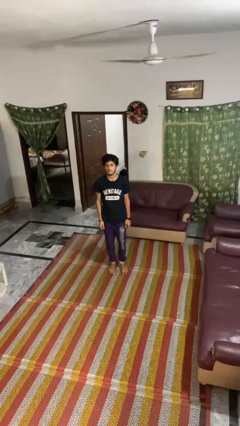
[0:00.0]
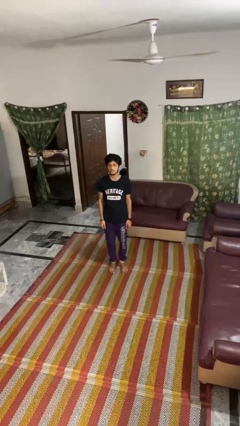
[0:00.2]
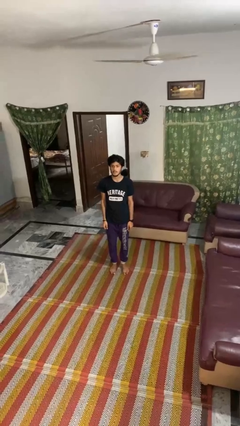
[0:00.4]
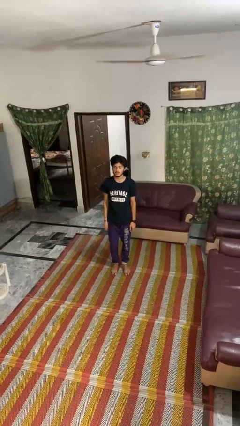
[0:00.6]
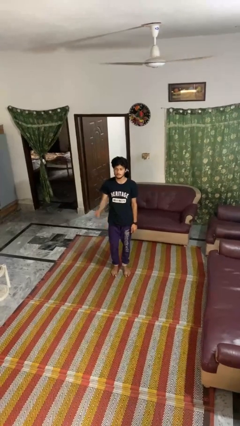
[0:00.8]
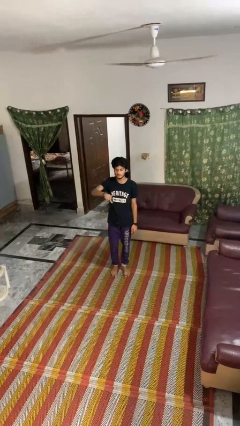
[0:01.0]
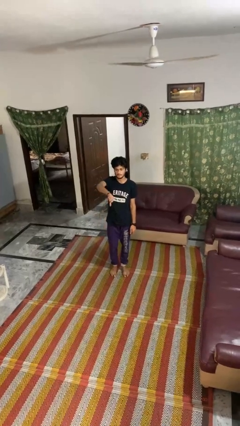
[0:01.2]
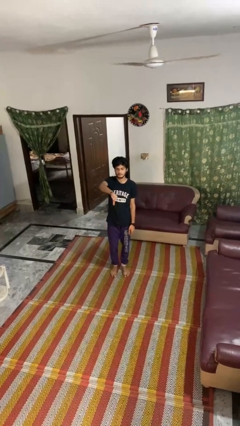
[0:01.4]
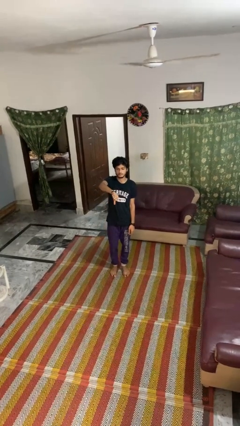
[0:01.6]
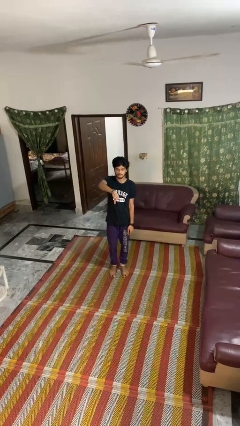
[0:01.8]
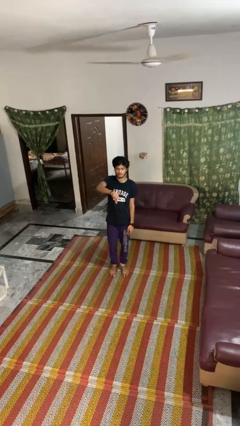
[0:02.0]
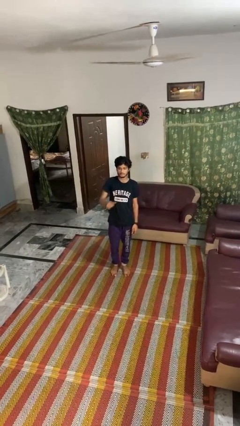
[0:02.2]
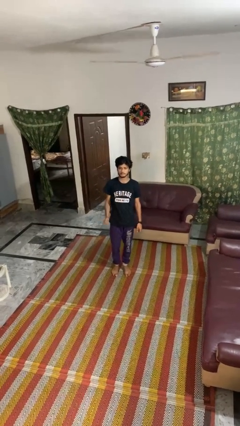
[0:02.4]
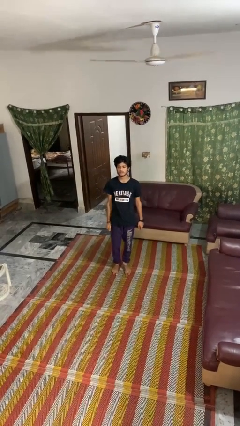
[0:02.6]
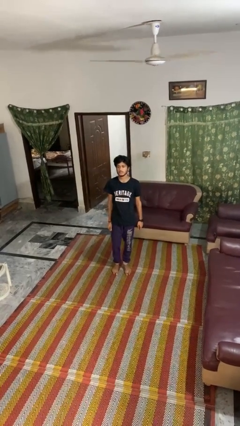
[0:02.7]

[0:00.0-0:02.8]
person gestures thumbs down

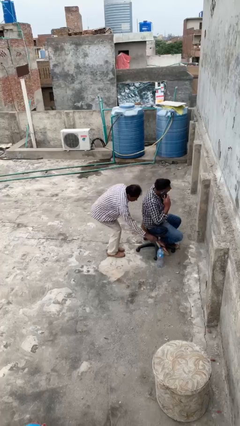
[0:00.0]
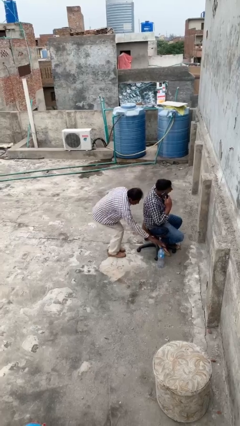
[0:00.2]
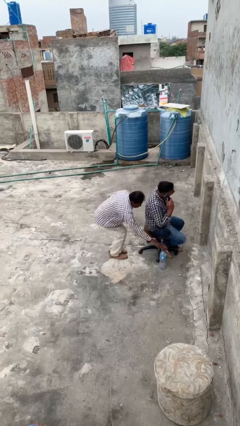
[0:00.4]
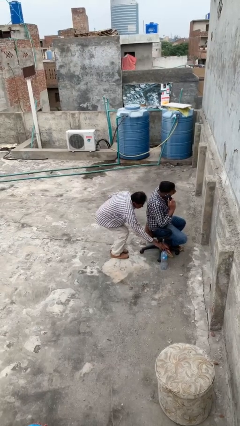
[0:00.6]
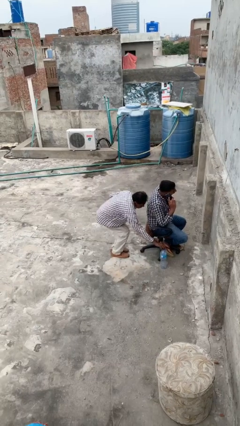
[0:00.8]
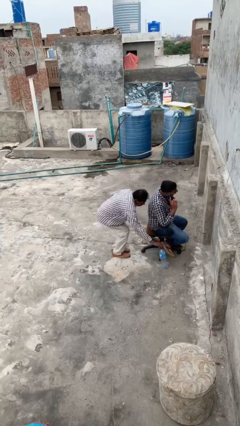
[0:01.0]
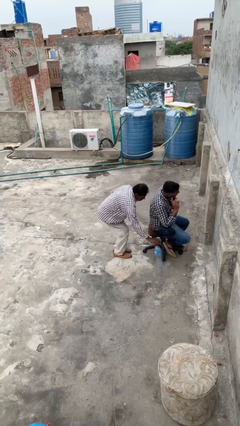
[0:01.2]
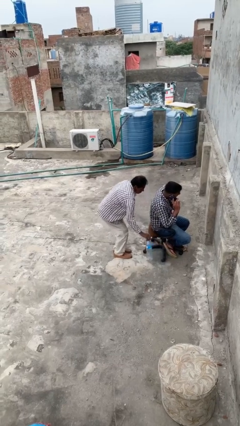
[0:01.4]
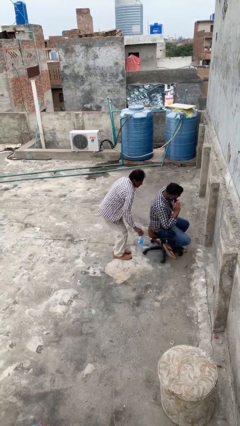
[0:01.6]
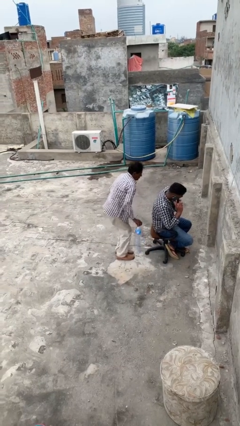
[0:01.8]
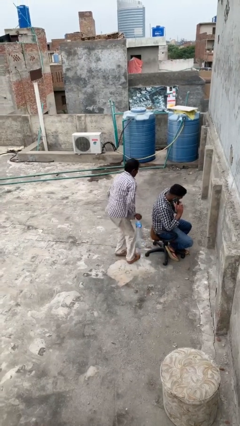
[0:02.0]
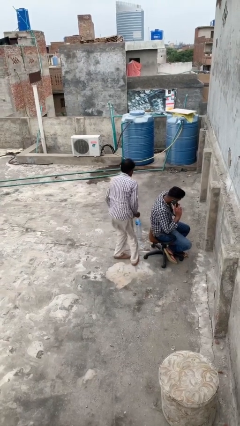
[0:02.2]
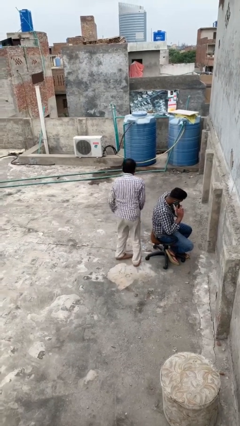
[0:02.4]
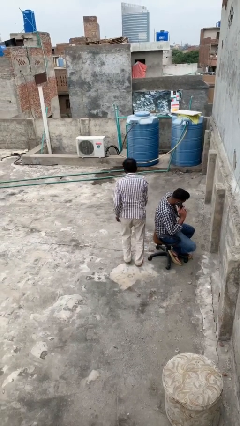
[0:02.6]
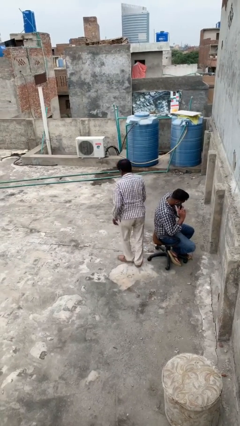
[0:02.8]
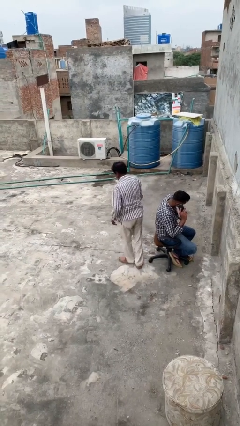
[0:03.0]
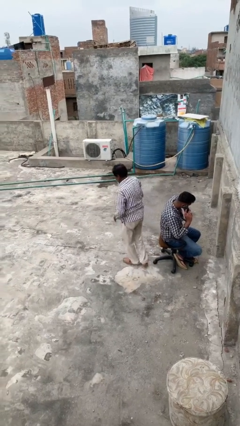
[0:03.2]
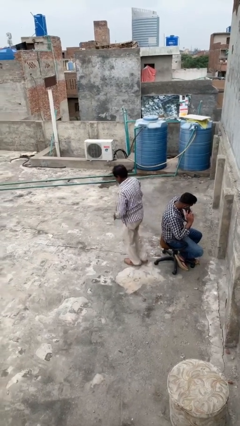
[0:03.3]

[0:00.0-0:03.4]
person steals object from person

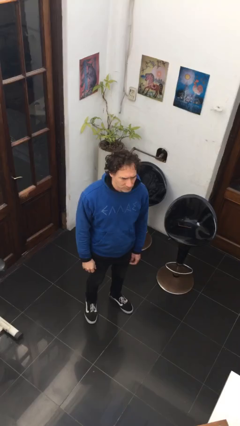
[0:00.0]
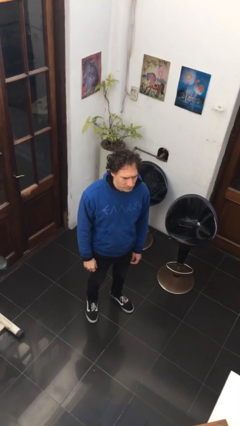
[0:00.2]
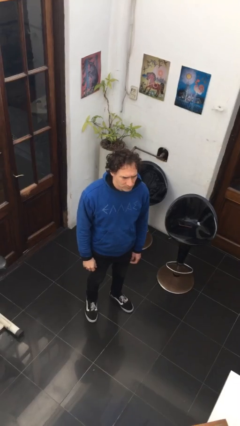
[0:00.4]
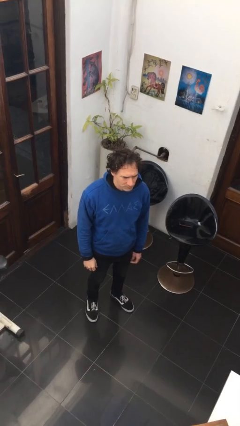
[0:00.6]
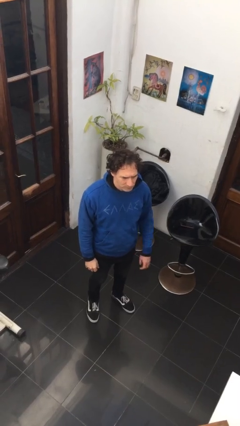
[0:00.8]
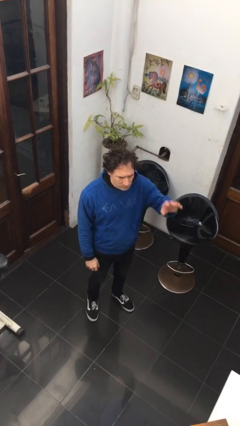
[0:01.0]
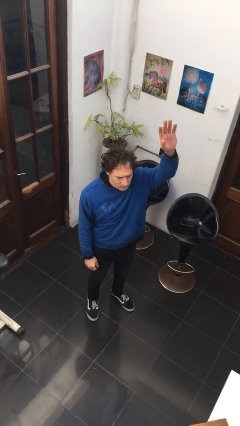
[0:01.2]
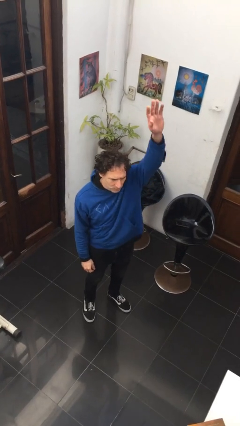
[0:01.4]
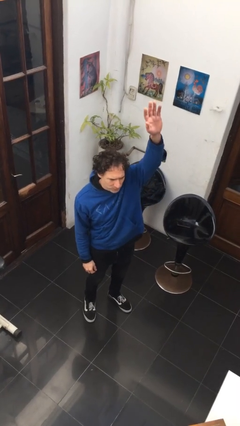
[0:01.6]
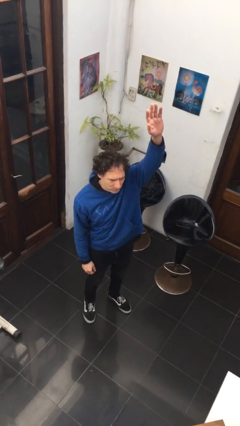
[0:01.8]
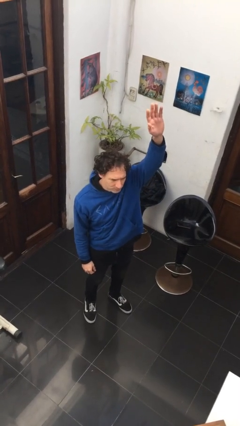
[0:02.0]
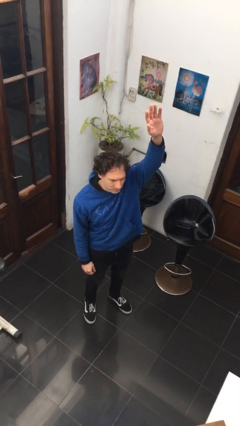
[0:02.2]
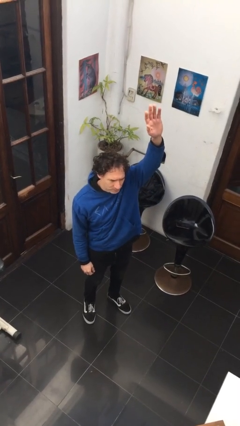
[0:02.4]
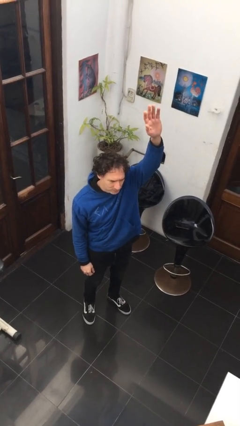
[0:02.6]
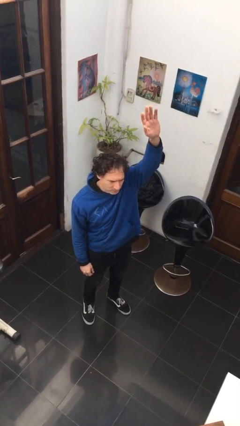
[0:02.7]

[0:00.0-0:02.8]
person gestures raise hand

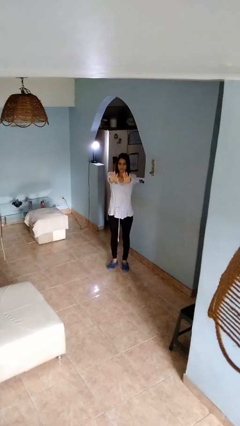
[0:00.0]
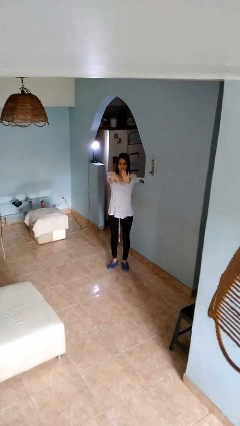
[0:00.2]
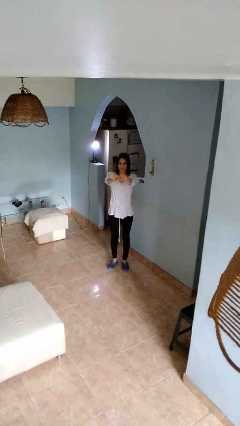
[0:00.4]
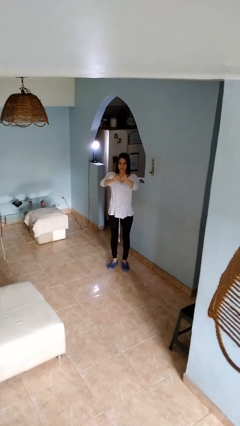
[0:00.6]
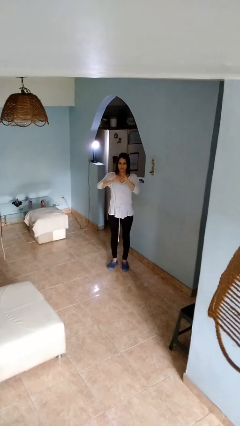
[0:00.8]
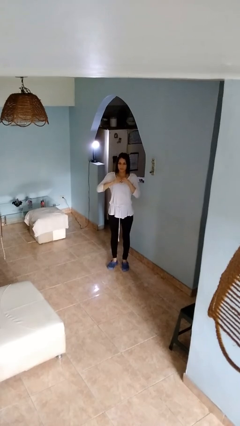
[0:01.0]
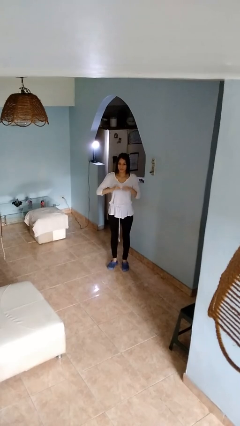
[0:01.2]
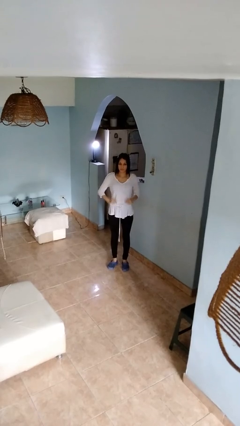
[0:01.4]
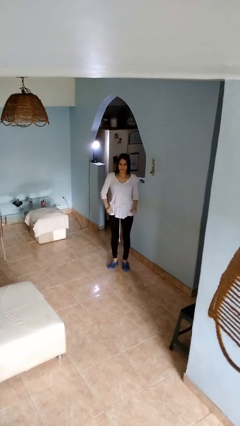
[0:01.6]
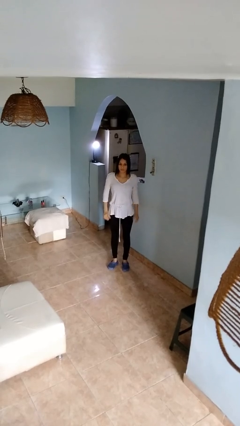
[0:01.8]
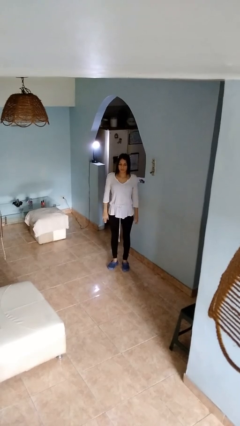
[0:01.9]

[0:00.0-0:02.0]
person gestures zoom out

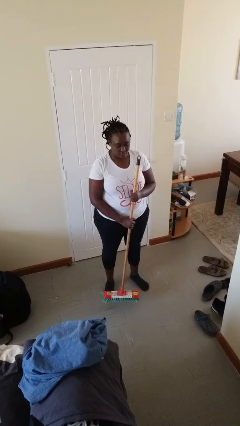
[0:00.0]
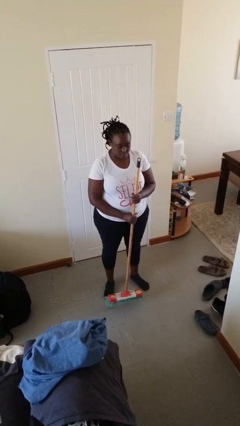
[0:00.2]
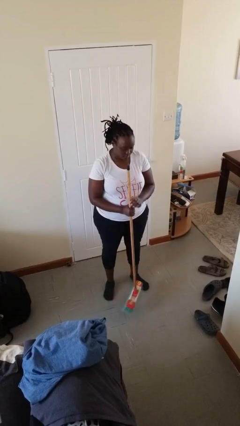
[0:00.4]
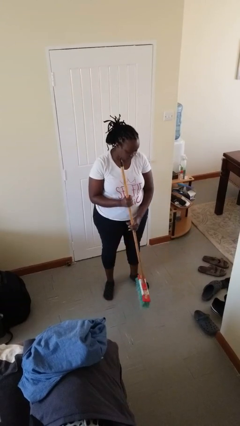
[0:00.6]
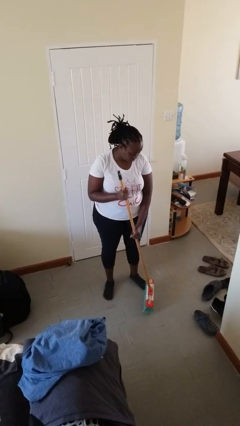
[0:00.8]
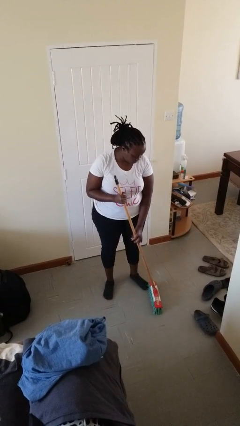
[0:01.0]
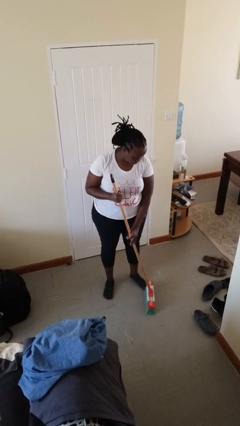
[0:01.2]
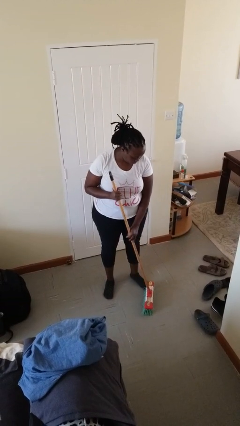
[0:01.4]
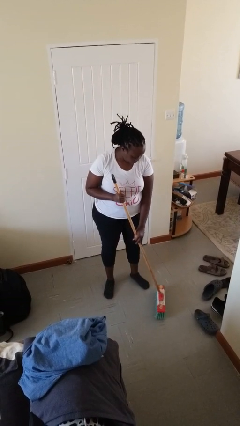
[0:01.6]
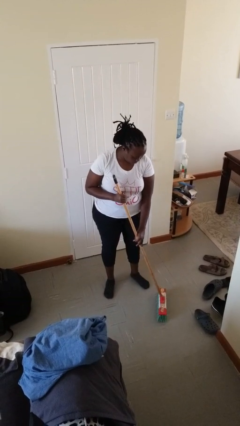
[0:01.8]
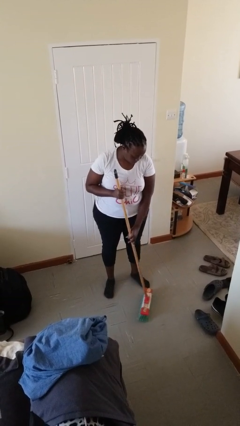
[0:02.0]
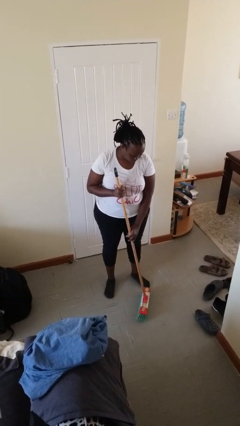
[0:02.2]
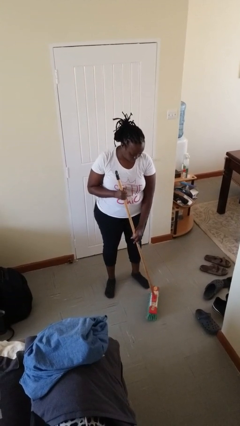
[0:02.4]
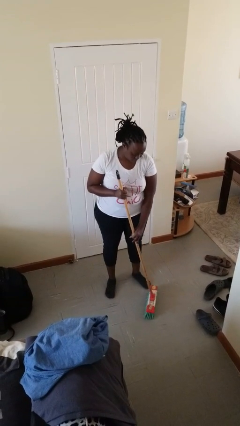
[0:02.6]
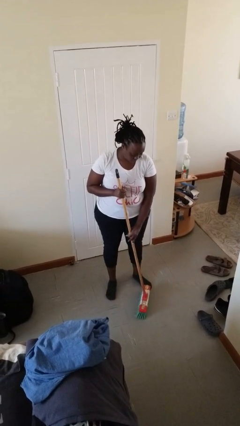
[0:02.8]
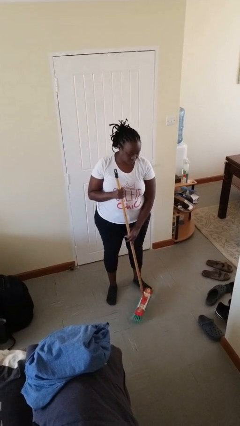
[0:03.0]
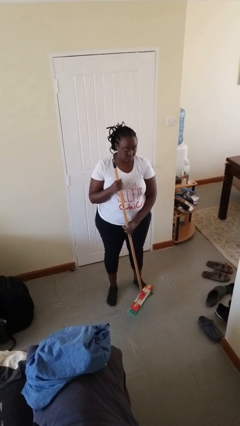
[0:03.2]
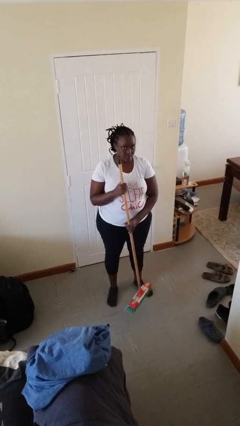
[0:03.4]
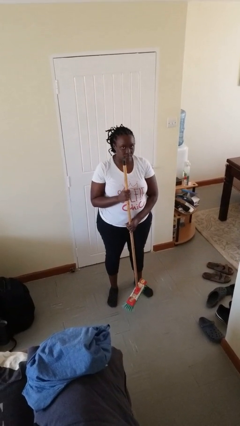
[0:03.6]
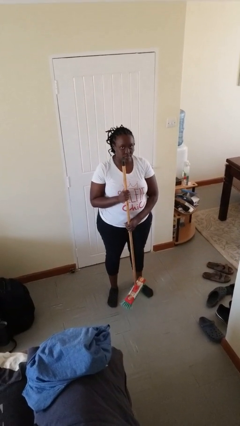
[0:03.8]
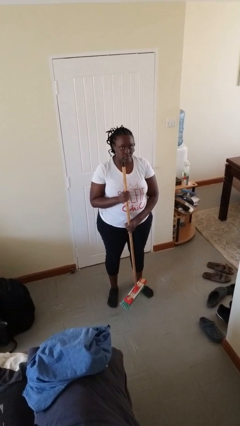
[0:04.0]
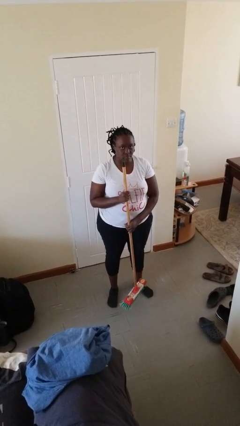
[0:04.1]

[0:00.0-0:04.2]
person sweeps floor

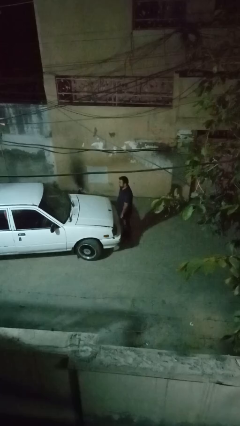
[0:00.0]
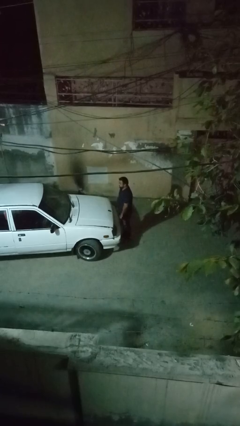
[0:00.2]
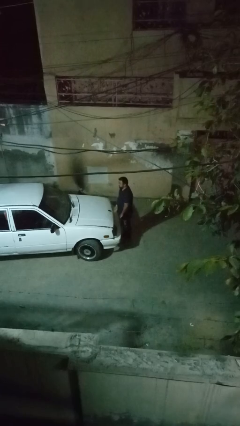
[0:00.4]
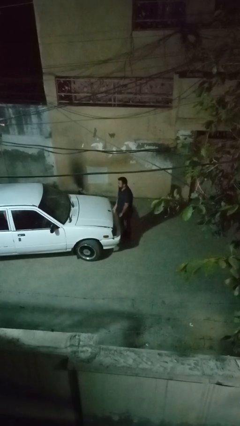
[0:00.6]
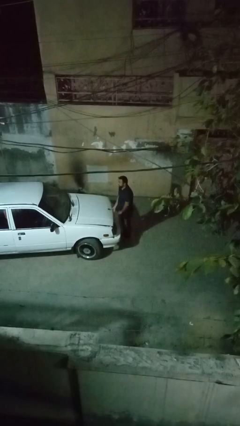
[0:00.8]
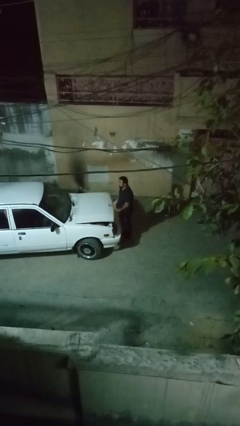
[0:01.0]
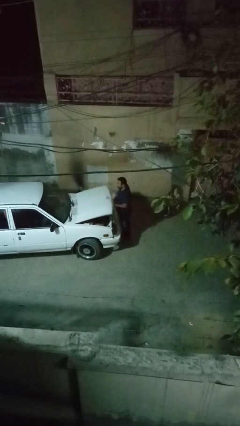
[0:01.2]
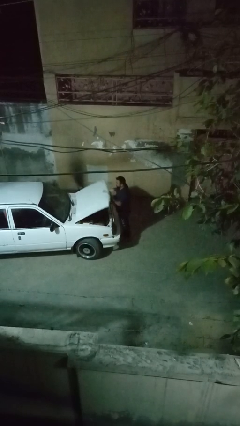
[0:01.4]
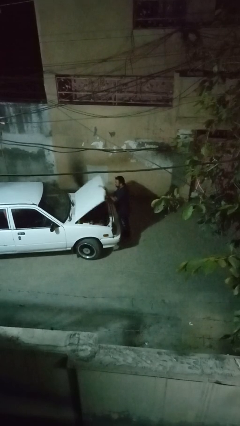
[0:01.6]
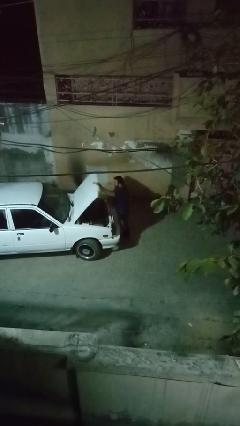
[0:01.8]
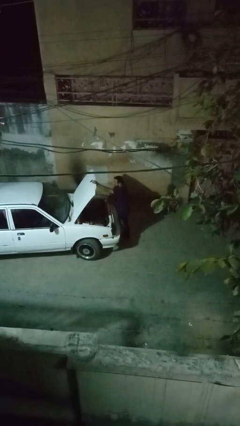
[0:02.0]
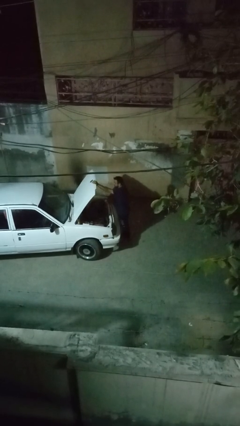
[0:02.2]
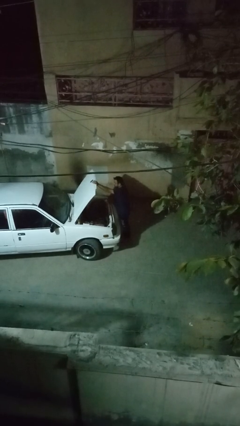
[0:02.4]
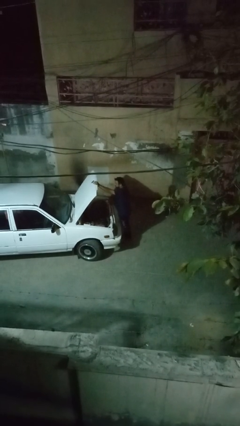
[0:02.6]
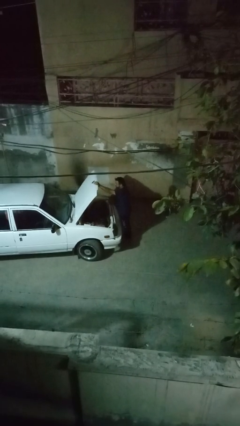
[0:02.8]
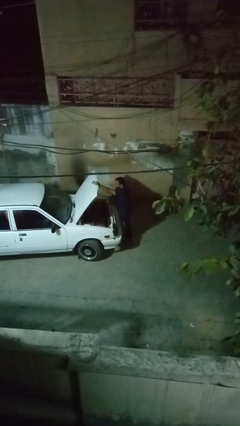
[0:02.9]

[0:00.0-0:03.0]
person opens car hood
